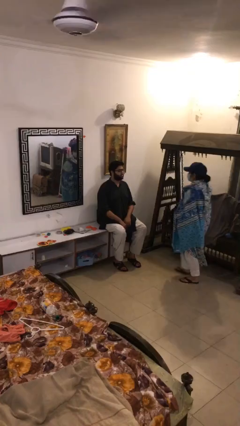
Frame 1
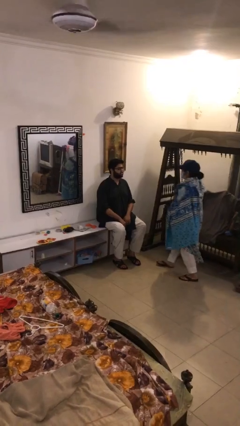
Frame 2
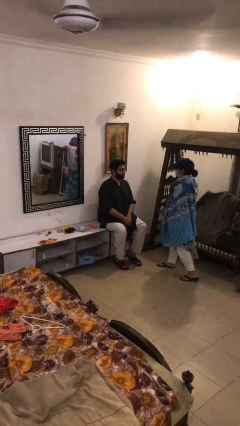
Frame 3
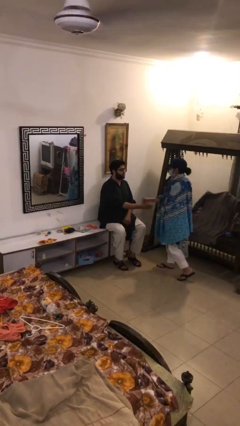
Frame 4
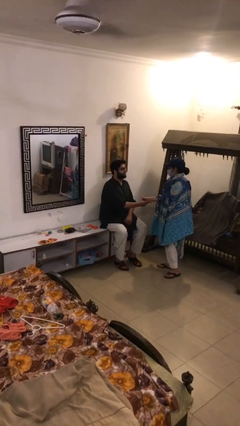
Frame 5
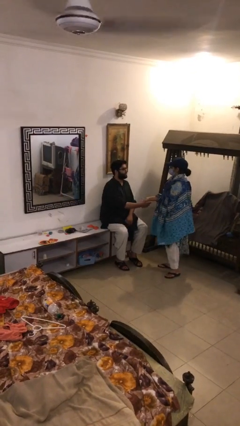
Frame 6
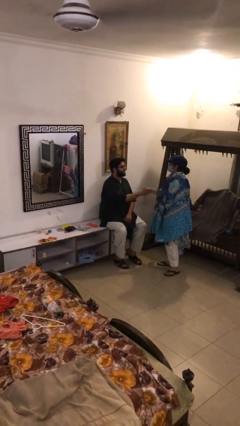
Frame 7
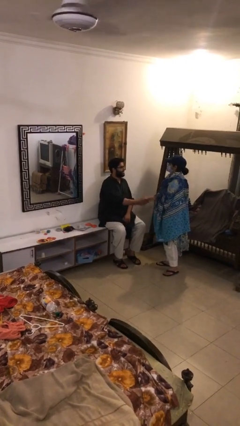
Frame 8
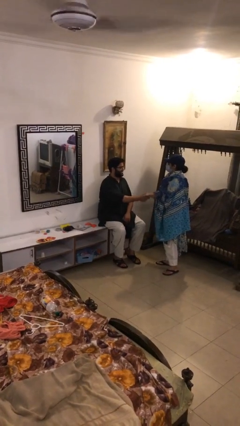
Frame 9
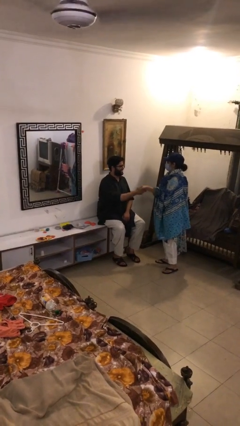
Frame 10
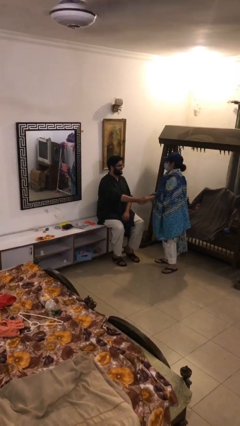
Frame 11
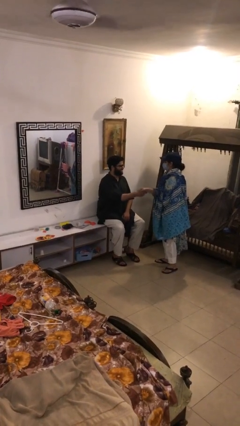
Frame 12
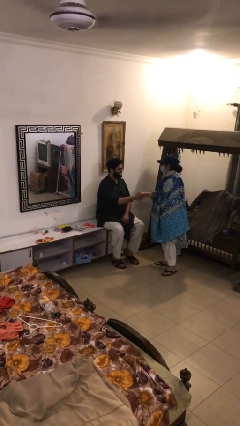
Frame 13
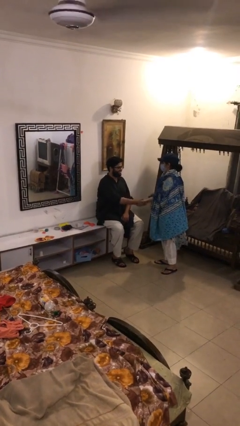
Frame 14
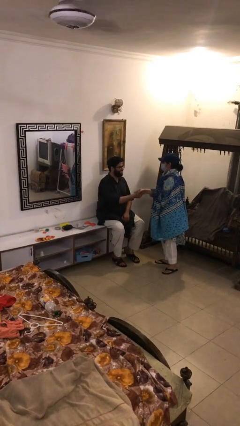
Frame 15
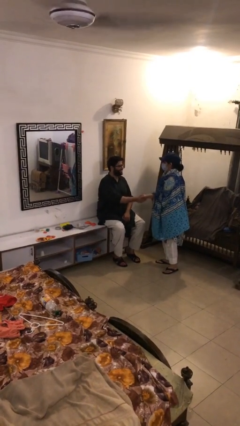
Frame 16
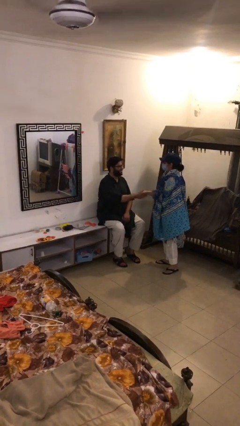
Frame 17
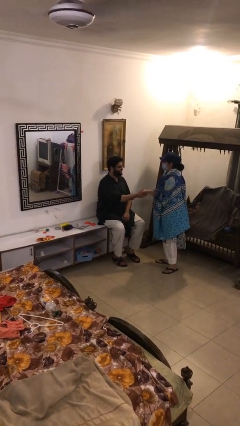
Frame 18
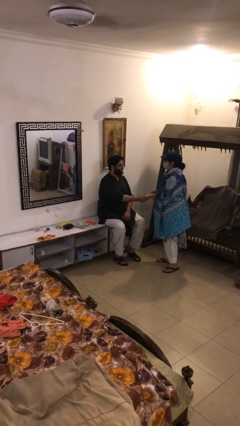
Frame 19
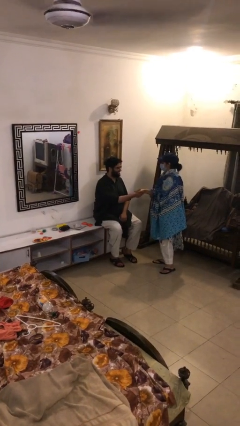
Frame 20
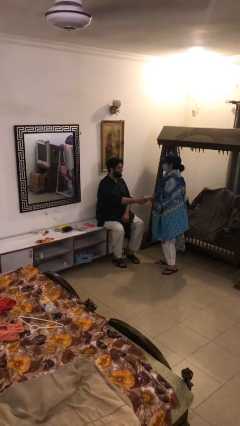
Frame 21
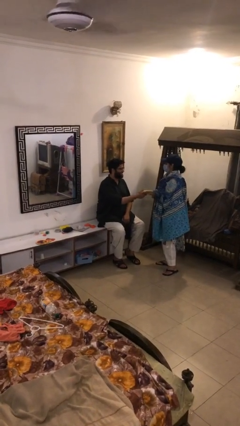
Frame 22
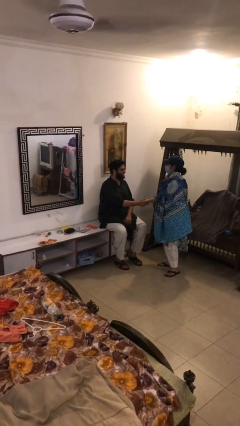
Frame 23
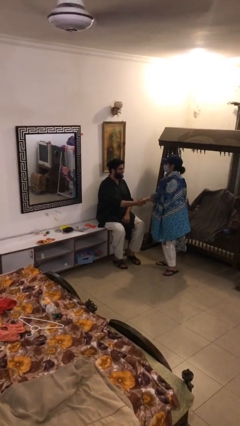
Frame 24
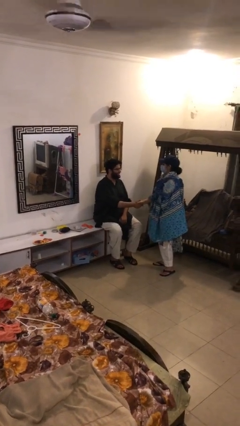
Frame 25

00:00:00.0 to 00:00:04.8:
person shakes hand

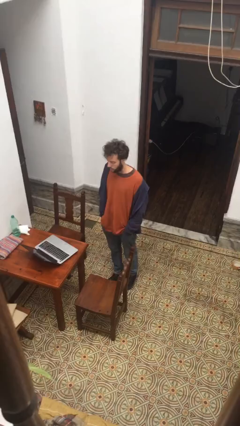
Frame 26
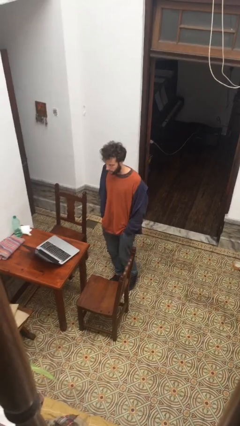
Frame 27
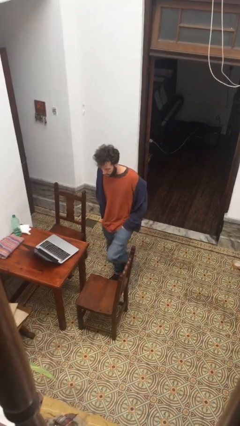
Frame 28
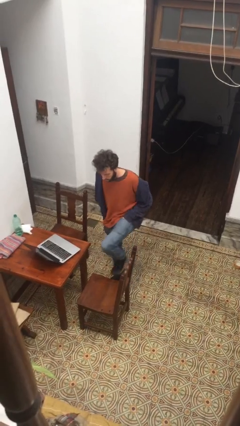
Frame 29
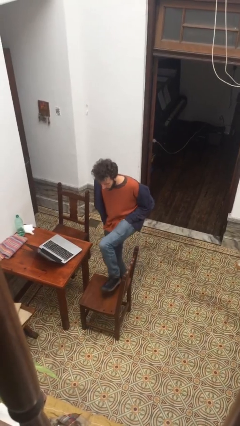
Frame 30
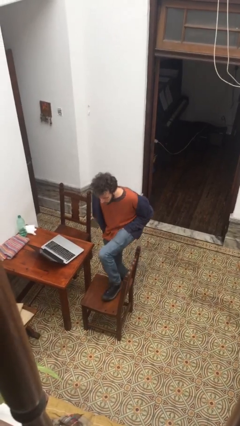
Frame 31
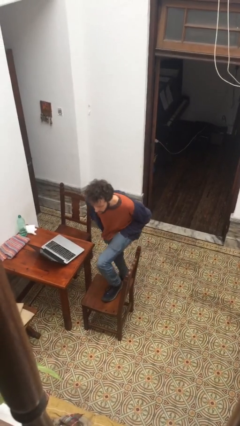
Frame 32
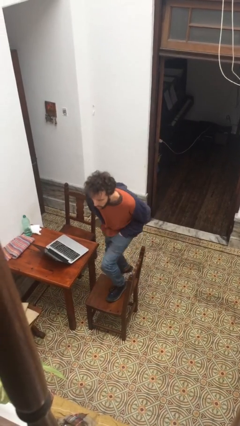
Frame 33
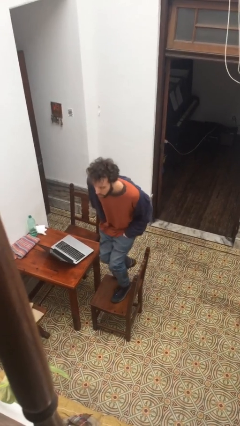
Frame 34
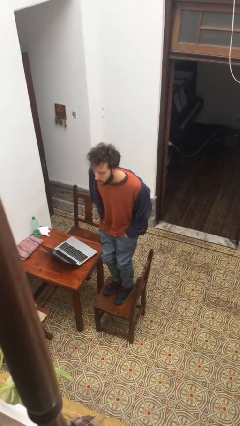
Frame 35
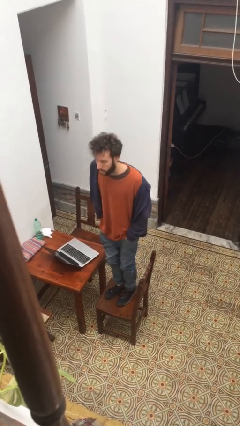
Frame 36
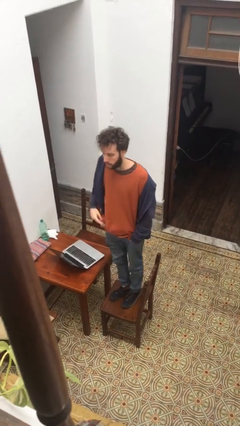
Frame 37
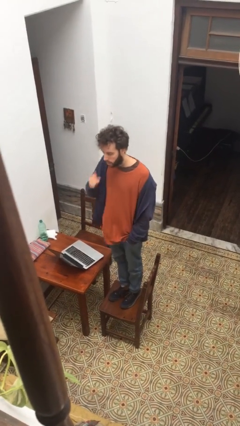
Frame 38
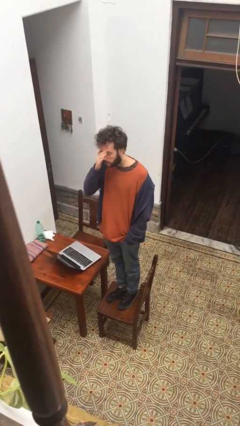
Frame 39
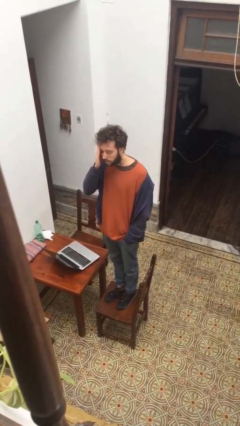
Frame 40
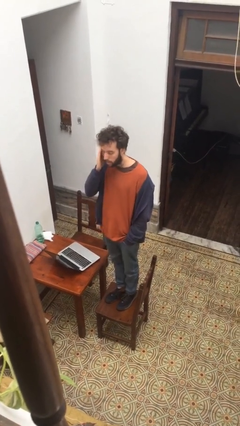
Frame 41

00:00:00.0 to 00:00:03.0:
person climbs on chair

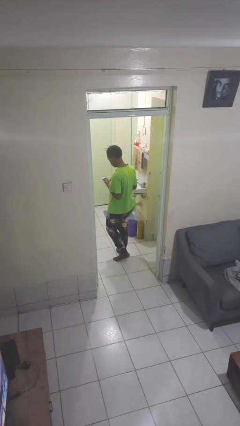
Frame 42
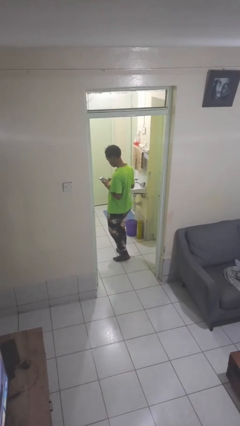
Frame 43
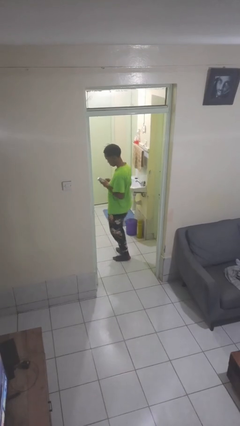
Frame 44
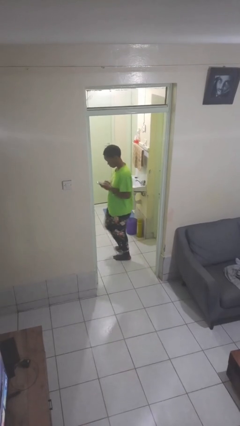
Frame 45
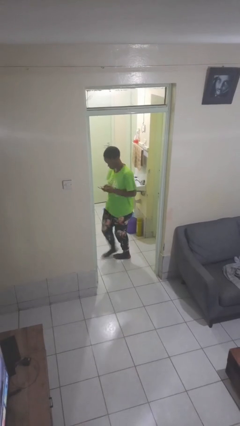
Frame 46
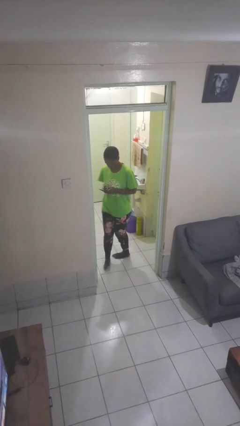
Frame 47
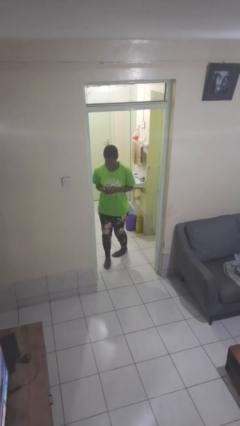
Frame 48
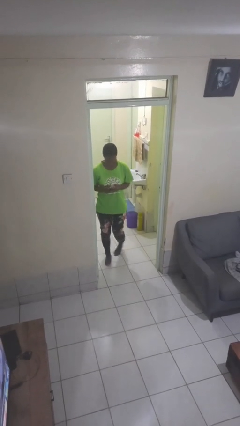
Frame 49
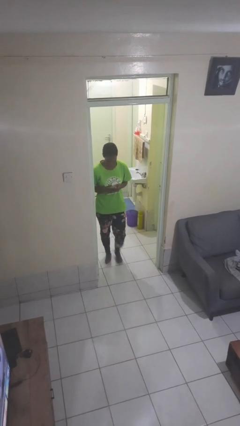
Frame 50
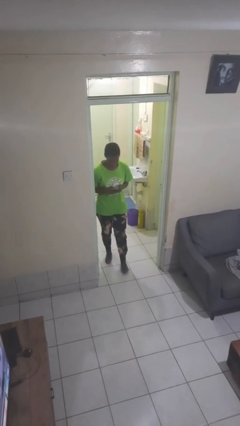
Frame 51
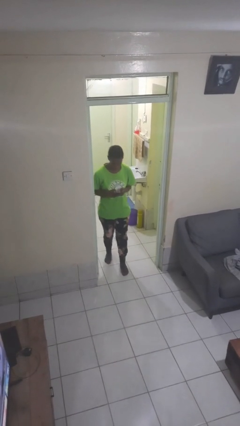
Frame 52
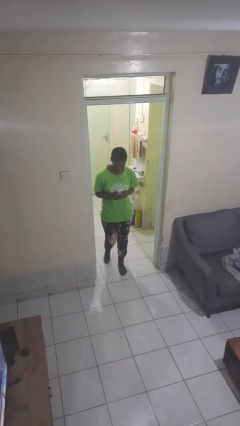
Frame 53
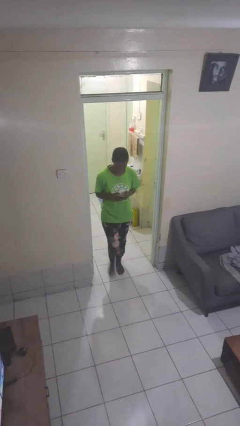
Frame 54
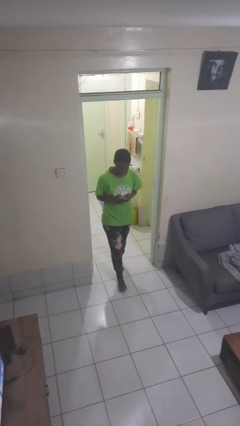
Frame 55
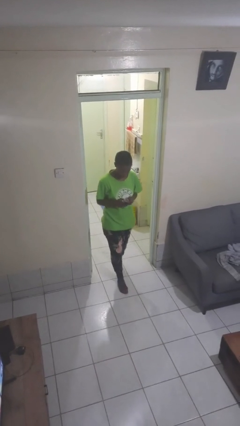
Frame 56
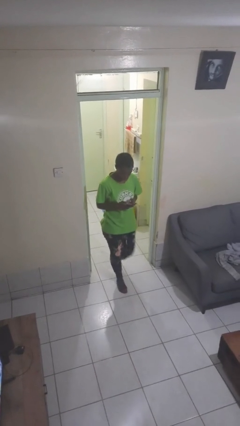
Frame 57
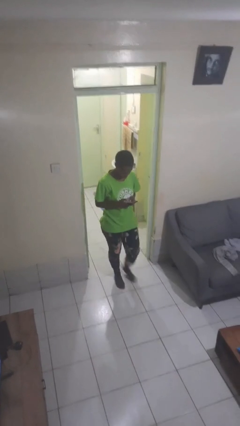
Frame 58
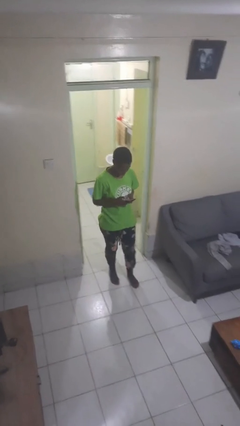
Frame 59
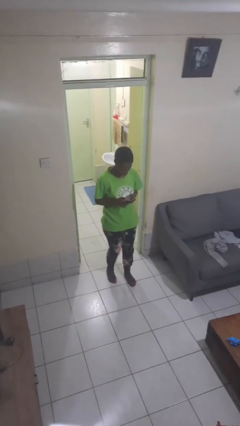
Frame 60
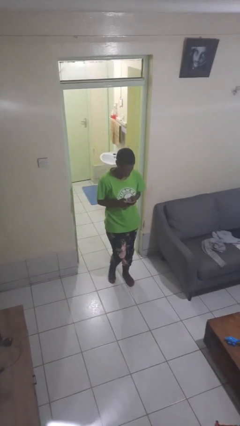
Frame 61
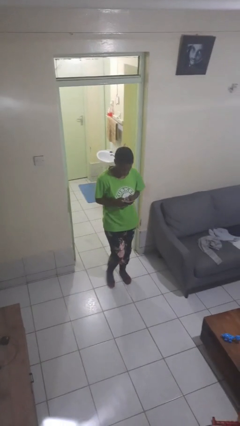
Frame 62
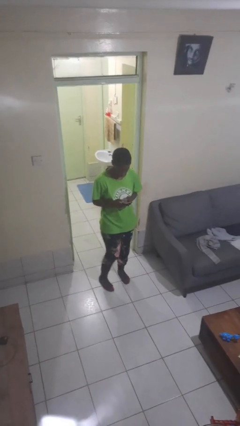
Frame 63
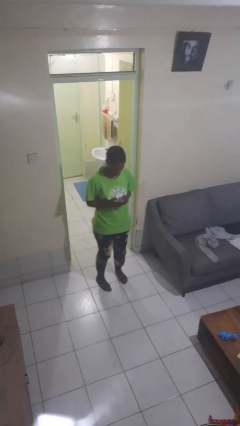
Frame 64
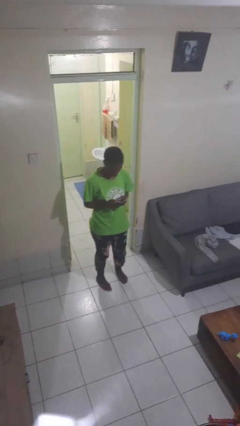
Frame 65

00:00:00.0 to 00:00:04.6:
person enters scene through structure

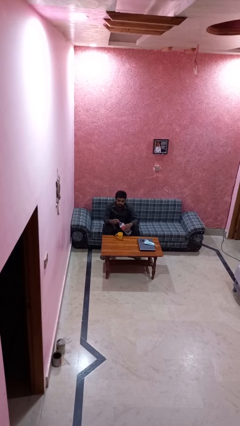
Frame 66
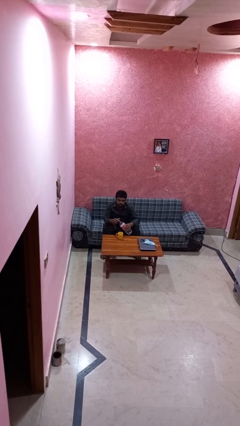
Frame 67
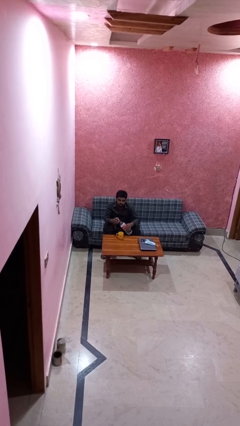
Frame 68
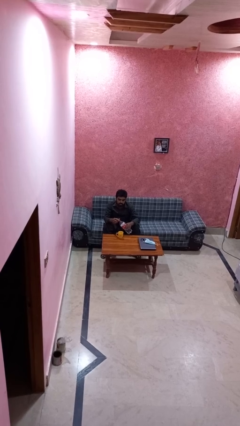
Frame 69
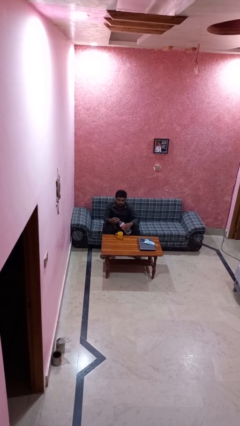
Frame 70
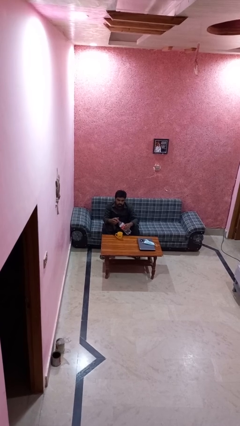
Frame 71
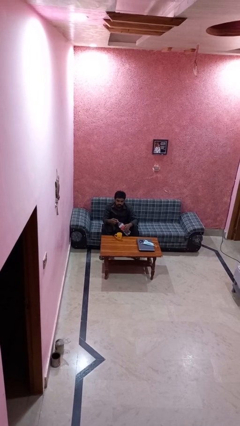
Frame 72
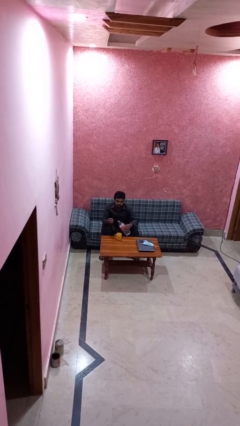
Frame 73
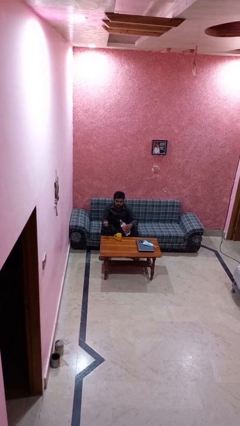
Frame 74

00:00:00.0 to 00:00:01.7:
person unscrews lid from bottle

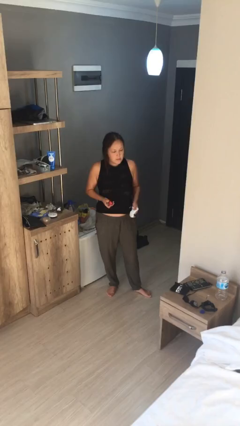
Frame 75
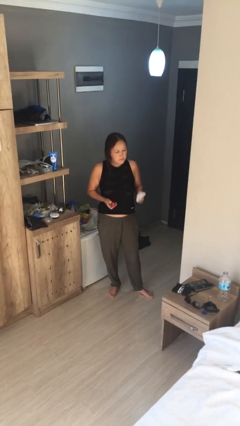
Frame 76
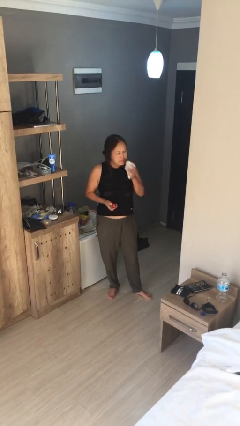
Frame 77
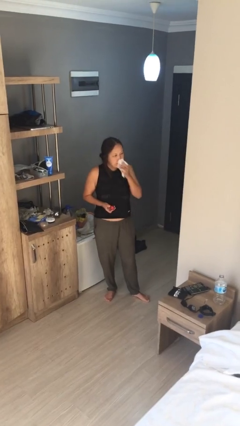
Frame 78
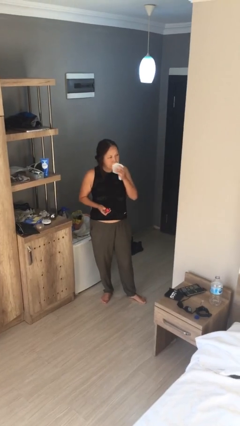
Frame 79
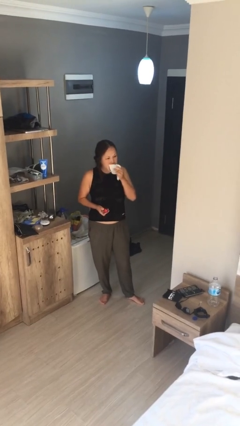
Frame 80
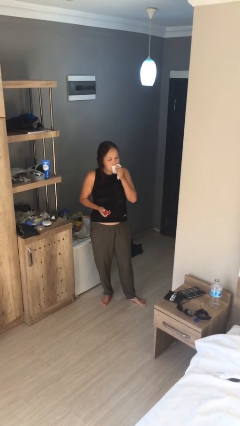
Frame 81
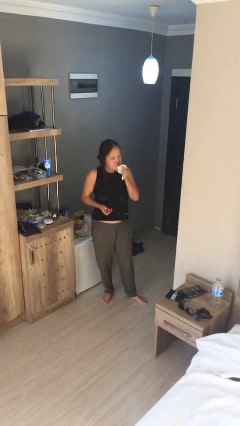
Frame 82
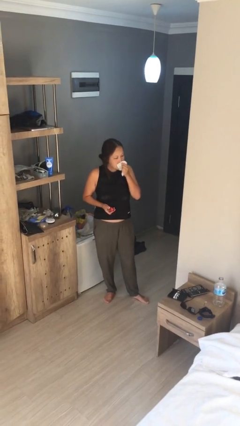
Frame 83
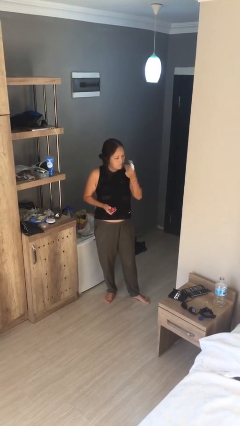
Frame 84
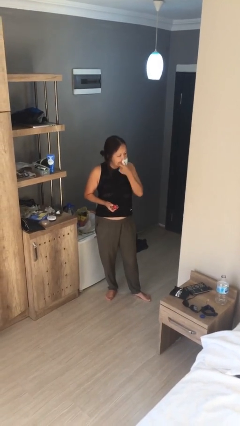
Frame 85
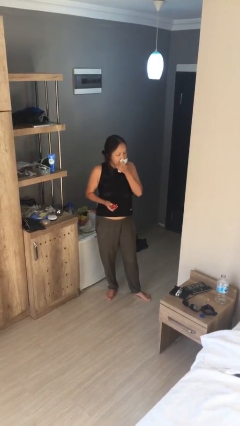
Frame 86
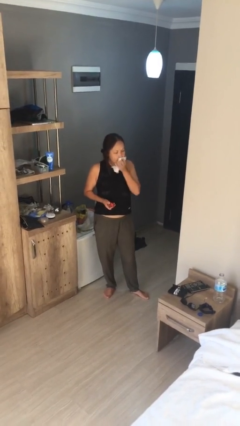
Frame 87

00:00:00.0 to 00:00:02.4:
person wipes mouth with napkin

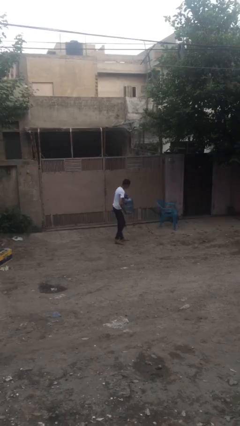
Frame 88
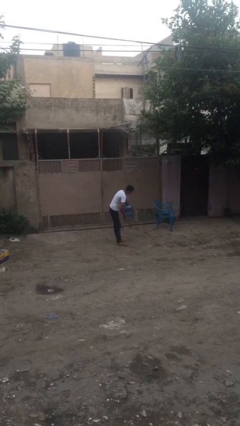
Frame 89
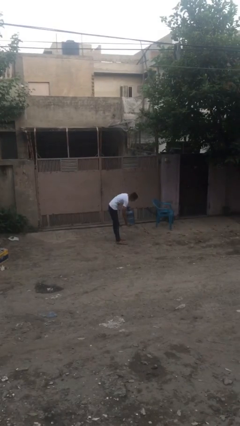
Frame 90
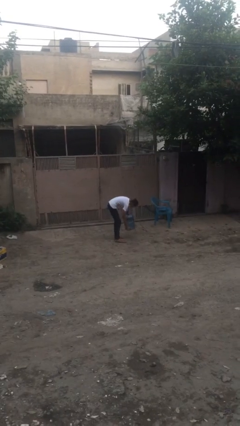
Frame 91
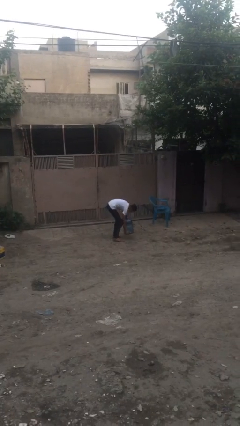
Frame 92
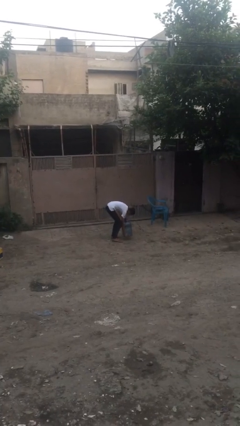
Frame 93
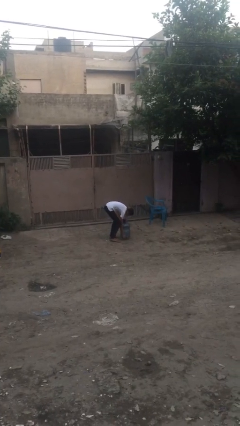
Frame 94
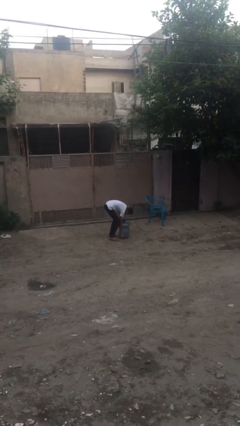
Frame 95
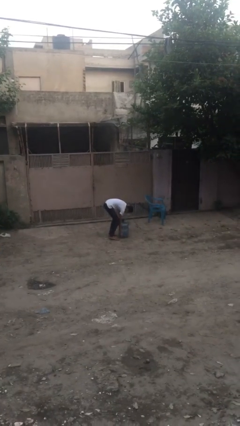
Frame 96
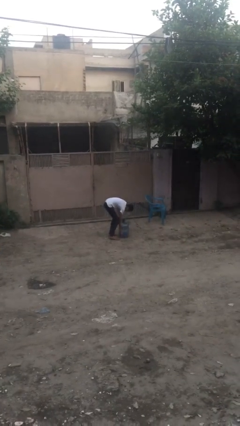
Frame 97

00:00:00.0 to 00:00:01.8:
person puts down object on floor
